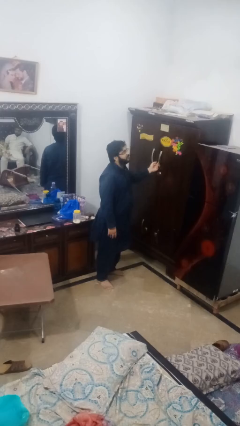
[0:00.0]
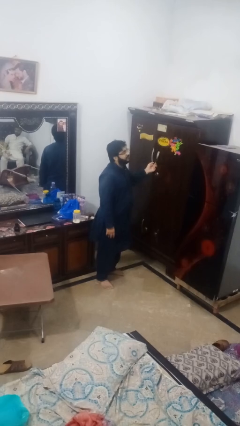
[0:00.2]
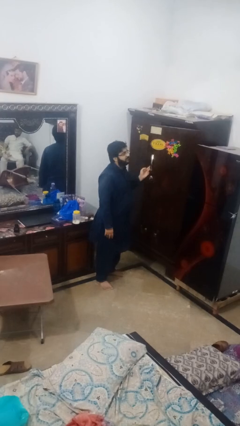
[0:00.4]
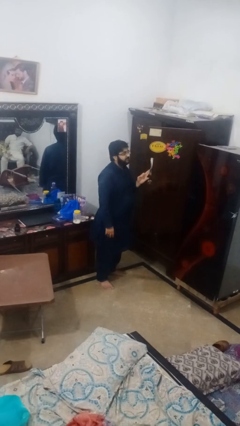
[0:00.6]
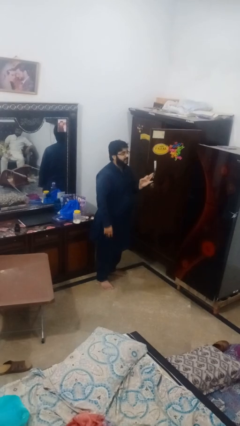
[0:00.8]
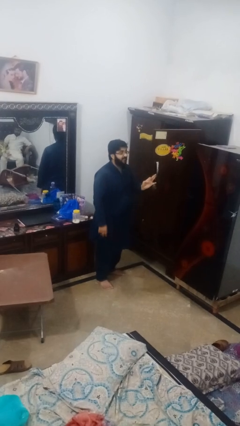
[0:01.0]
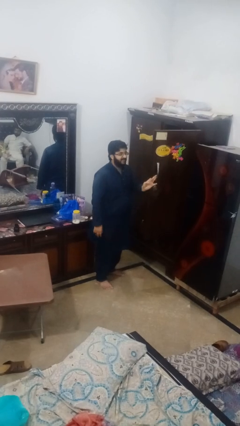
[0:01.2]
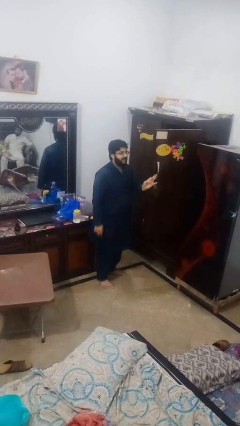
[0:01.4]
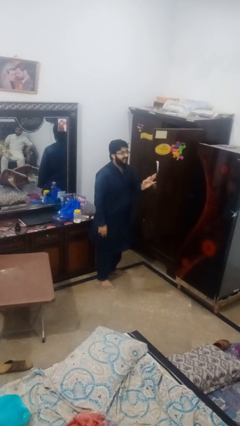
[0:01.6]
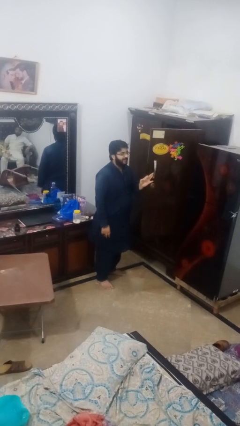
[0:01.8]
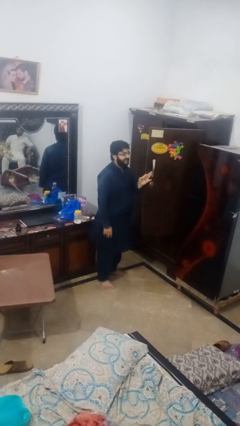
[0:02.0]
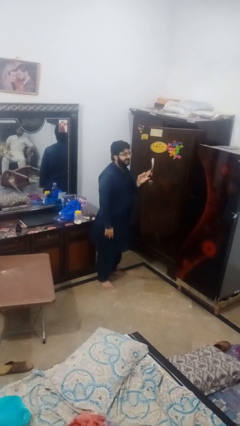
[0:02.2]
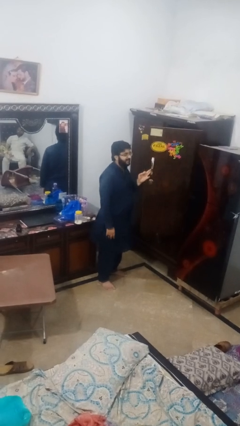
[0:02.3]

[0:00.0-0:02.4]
person opens closet door

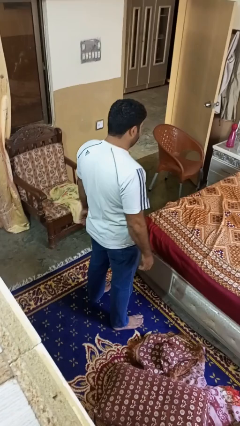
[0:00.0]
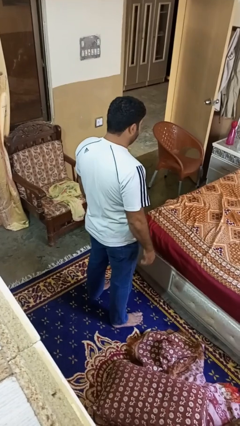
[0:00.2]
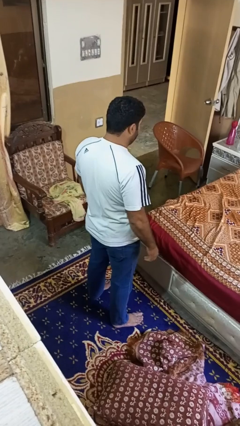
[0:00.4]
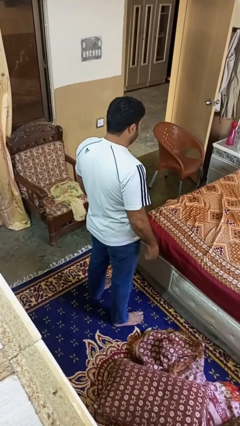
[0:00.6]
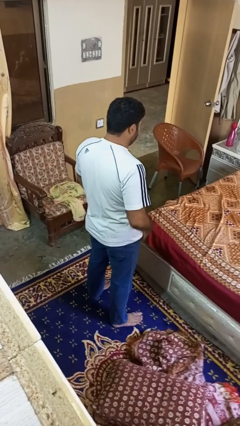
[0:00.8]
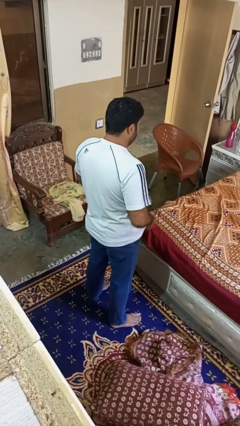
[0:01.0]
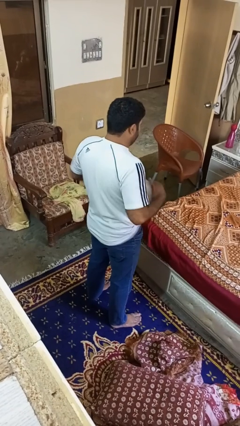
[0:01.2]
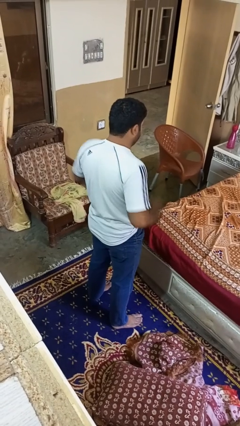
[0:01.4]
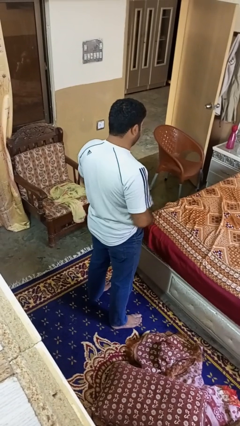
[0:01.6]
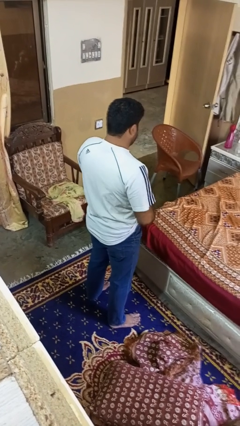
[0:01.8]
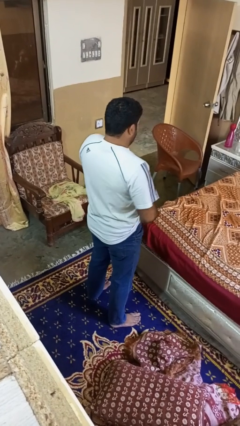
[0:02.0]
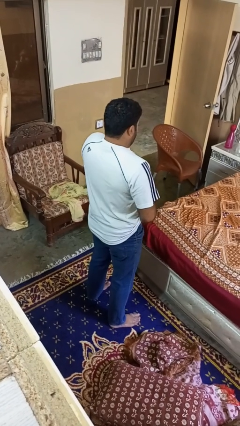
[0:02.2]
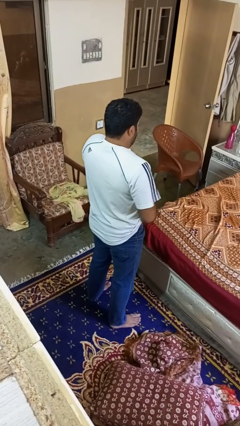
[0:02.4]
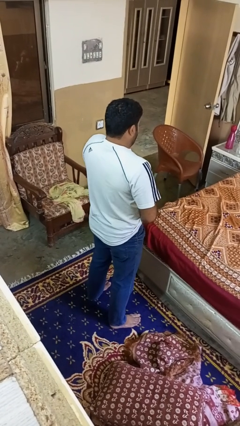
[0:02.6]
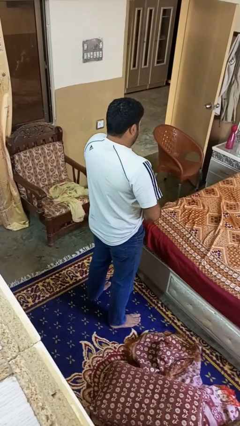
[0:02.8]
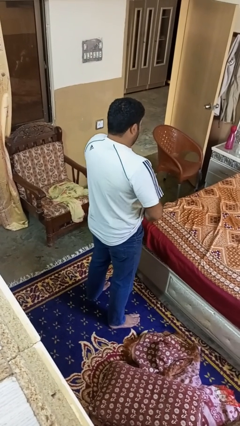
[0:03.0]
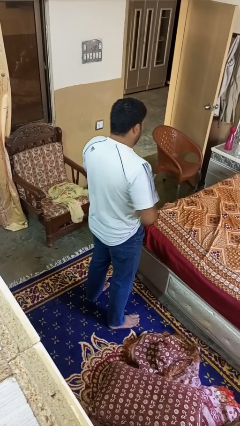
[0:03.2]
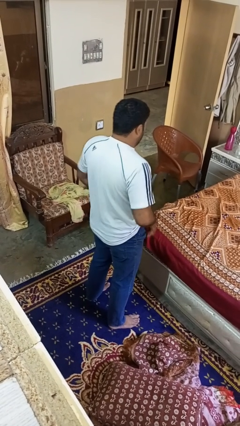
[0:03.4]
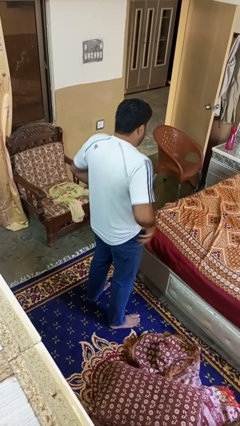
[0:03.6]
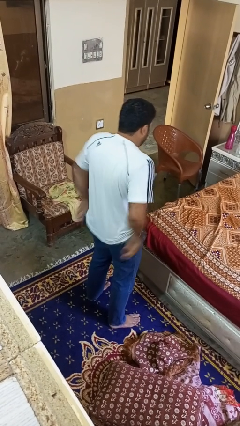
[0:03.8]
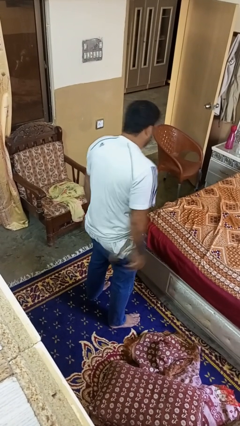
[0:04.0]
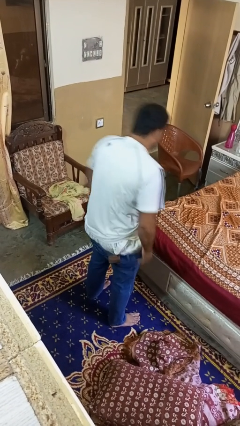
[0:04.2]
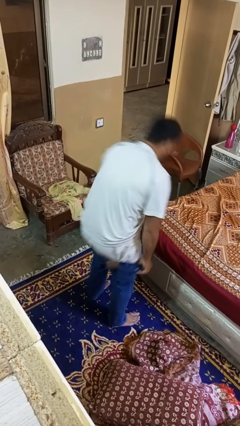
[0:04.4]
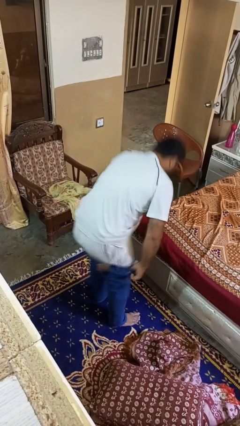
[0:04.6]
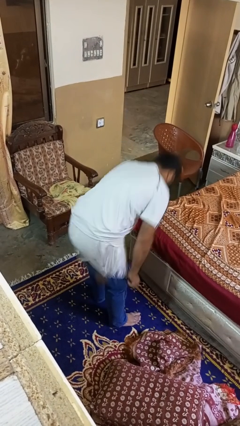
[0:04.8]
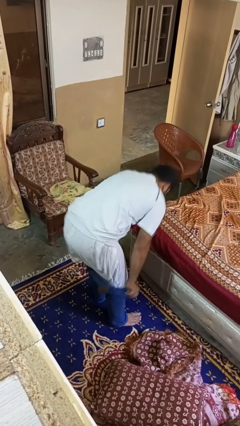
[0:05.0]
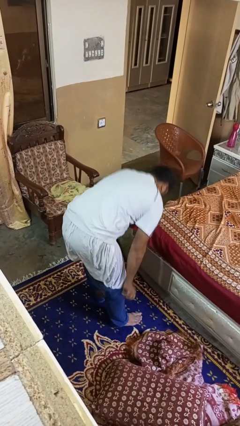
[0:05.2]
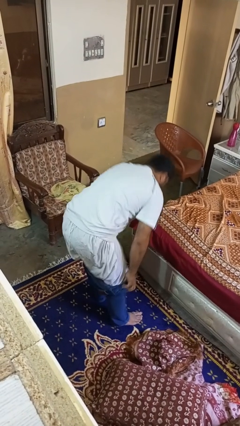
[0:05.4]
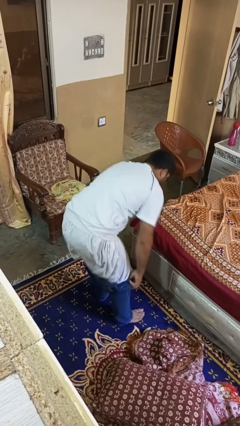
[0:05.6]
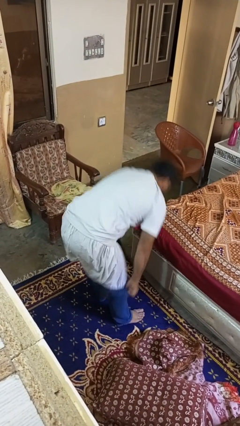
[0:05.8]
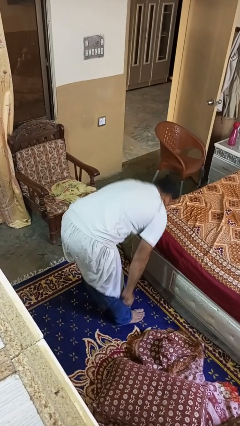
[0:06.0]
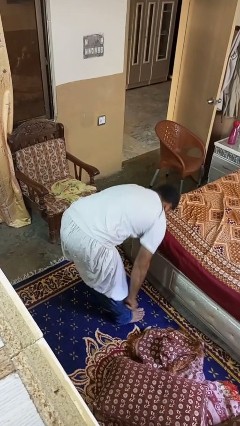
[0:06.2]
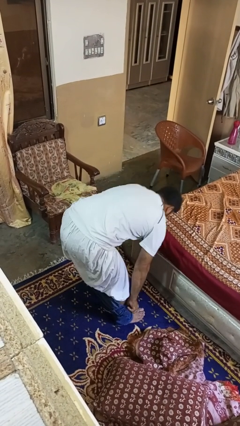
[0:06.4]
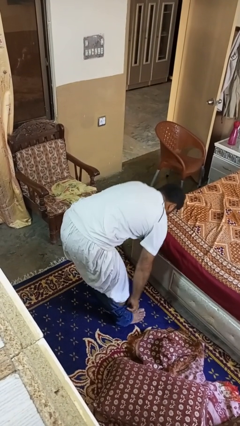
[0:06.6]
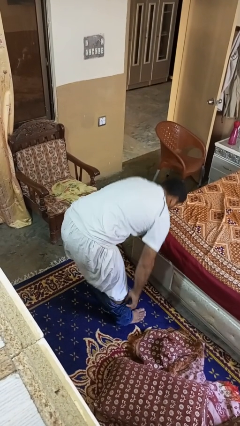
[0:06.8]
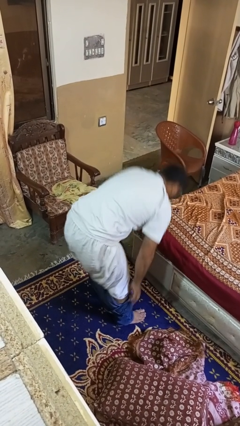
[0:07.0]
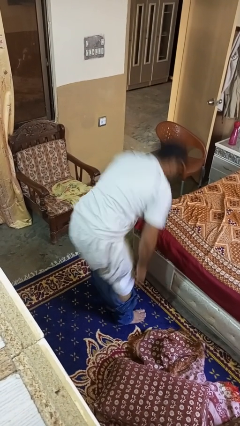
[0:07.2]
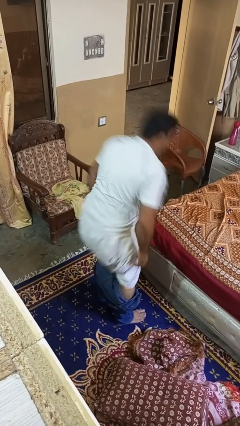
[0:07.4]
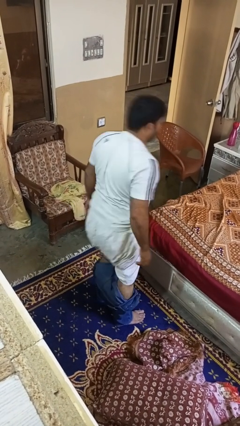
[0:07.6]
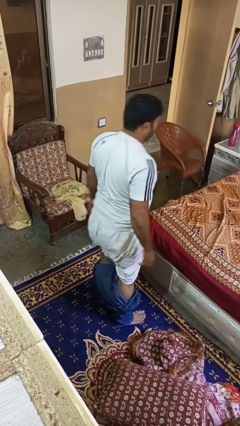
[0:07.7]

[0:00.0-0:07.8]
person takes off pants

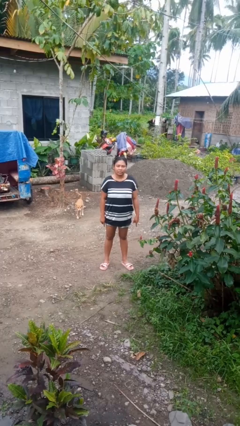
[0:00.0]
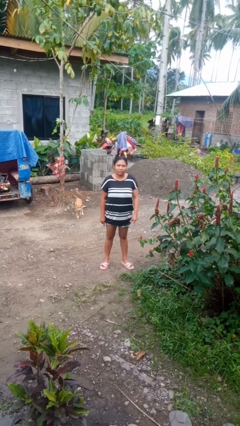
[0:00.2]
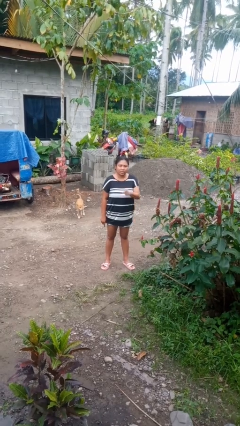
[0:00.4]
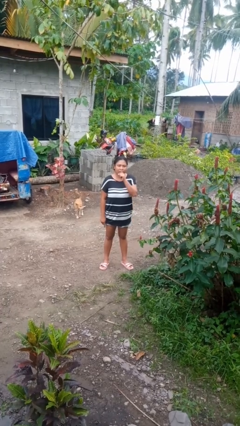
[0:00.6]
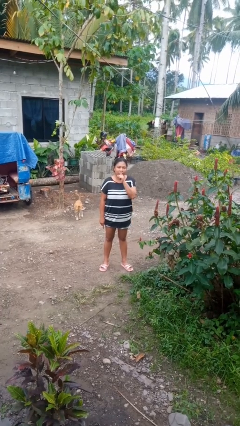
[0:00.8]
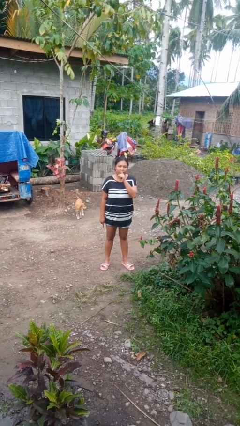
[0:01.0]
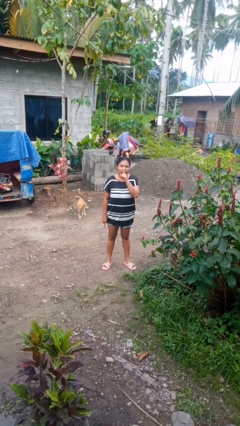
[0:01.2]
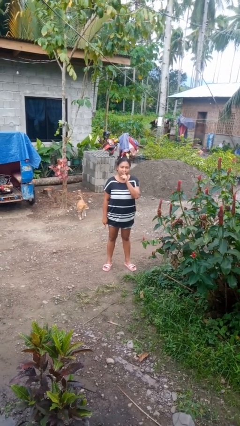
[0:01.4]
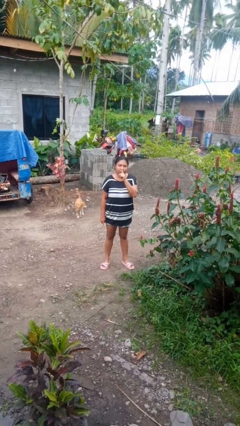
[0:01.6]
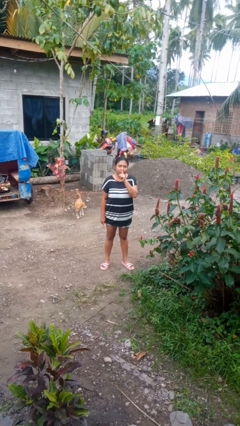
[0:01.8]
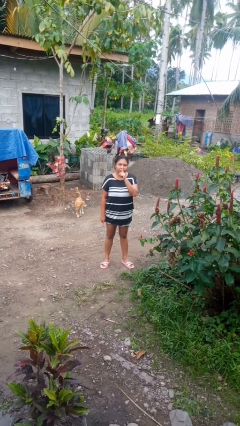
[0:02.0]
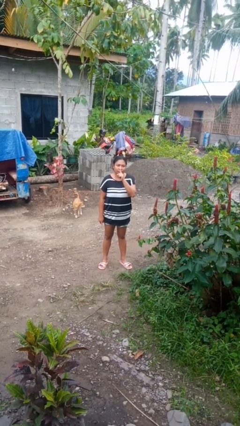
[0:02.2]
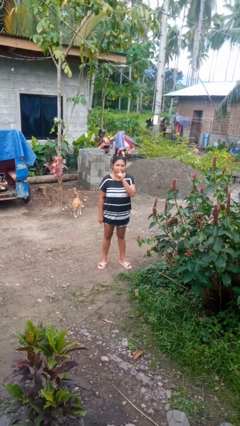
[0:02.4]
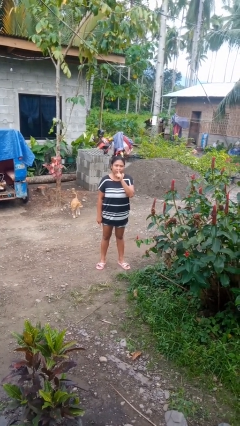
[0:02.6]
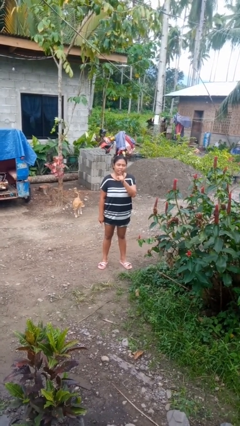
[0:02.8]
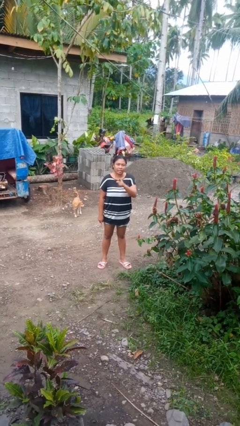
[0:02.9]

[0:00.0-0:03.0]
person gestures be quiet

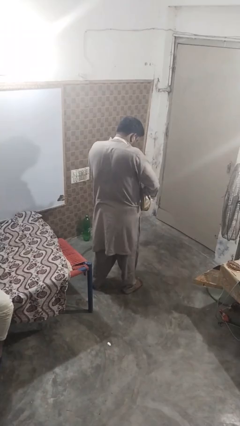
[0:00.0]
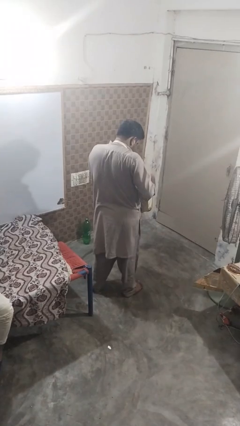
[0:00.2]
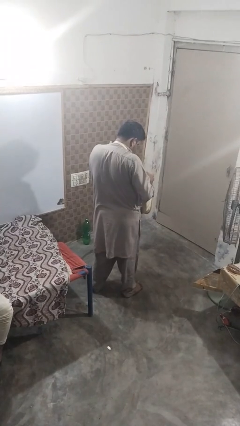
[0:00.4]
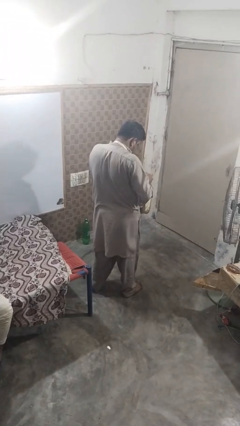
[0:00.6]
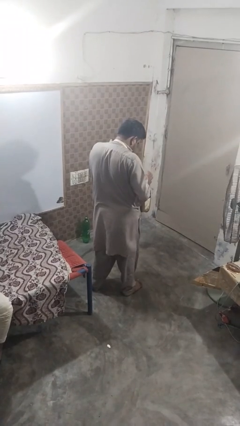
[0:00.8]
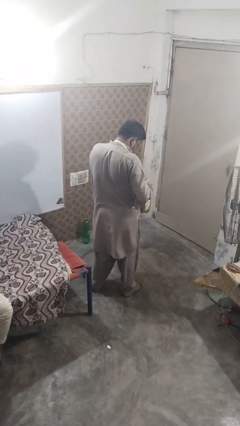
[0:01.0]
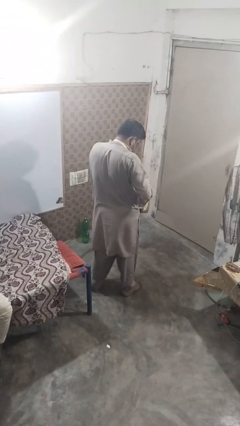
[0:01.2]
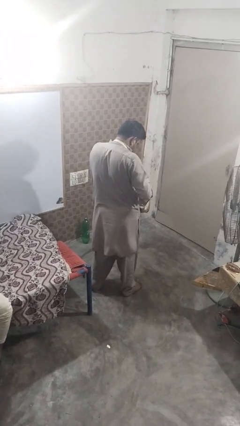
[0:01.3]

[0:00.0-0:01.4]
person puts object into purse

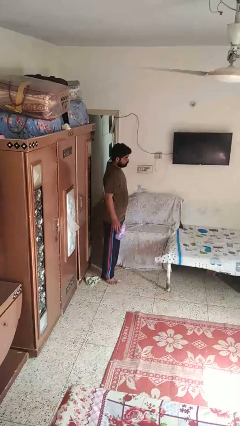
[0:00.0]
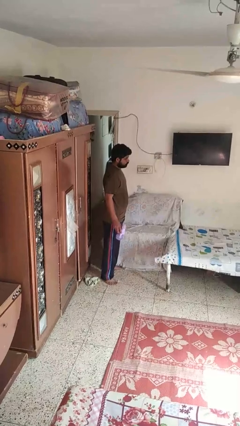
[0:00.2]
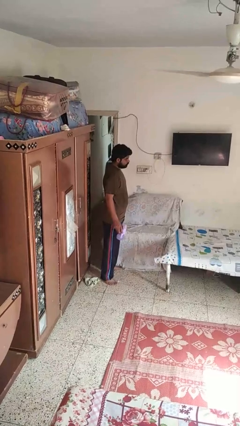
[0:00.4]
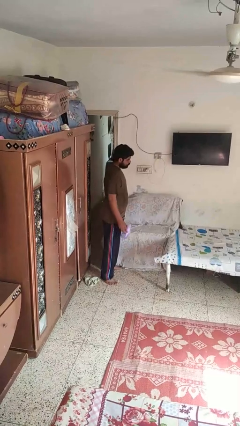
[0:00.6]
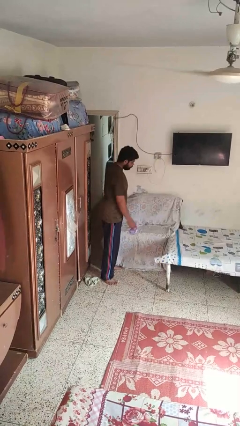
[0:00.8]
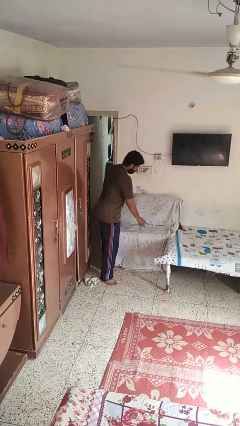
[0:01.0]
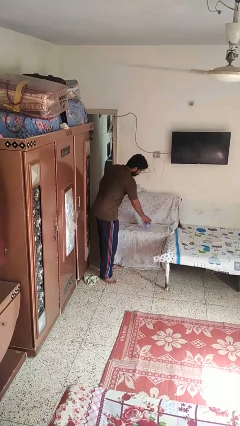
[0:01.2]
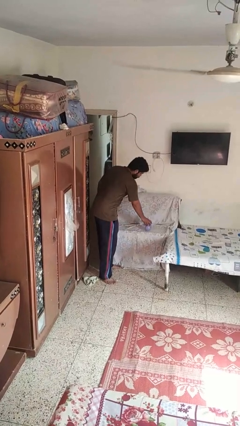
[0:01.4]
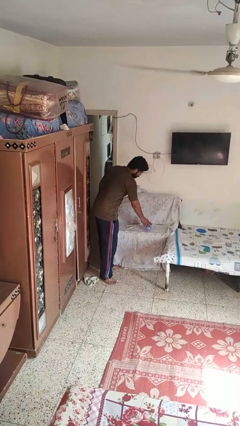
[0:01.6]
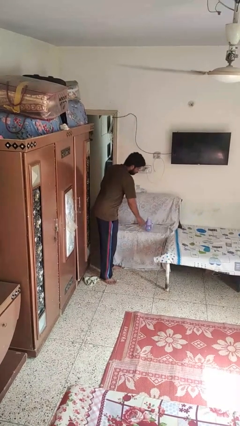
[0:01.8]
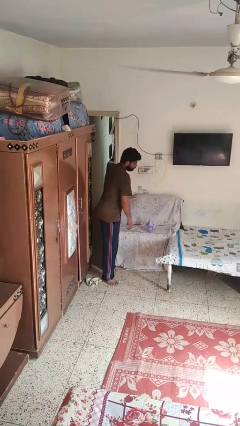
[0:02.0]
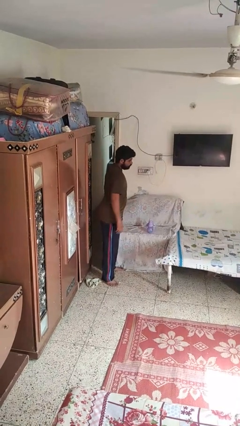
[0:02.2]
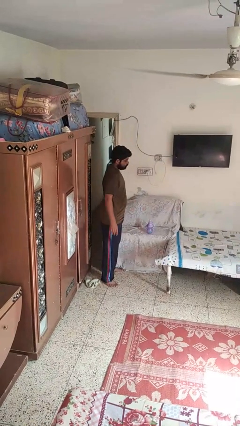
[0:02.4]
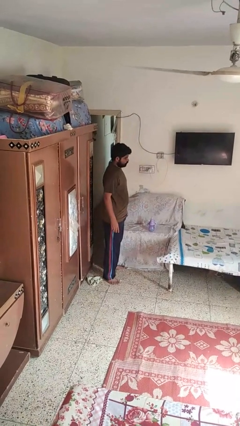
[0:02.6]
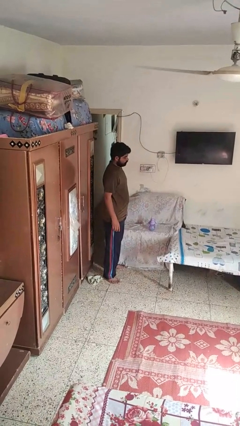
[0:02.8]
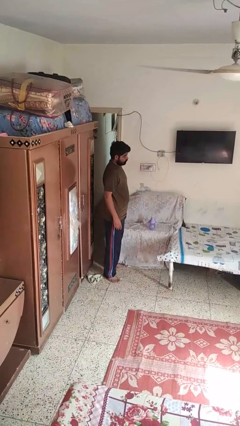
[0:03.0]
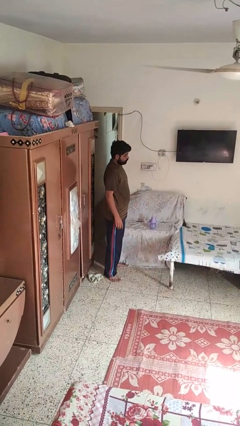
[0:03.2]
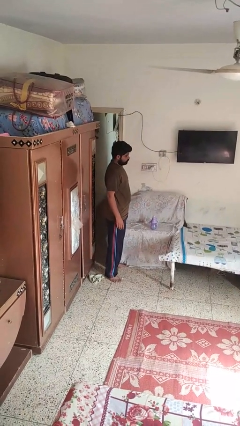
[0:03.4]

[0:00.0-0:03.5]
person puts down object on couch

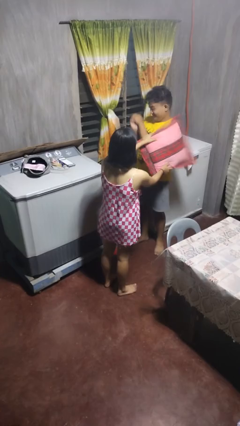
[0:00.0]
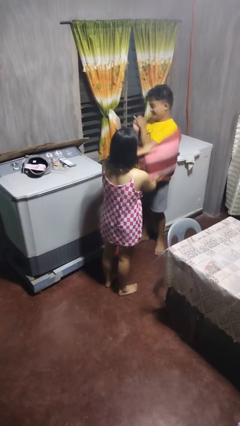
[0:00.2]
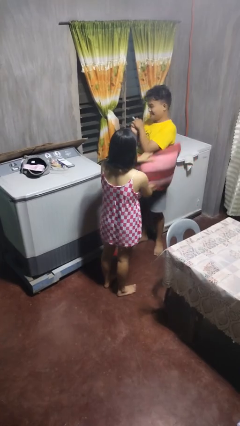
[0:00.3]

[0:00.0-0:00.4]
person hits person with pillow
